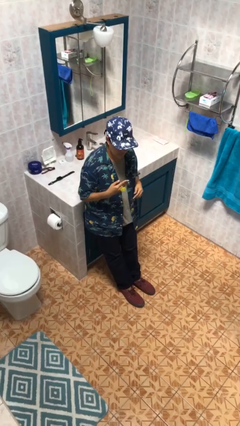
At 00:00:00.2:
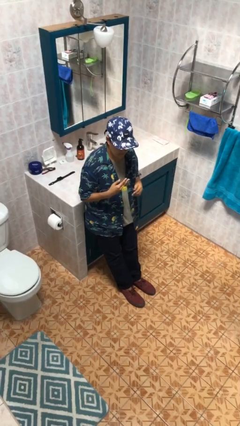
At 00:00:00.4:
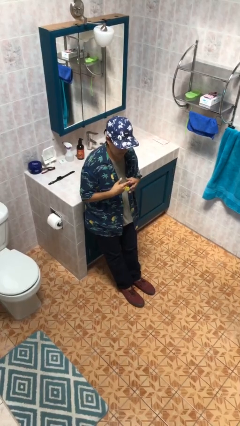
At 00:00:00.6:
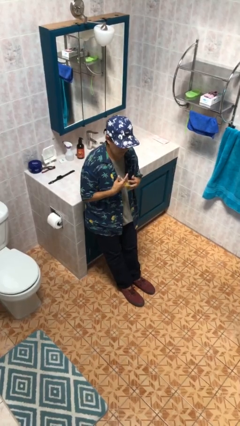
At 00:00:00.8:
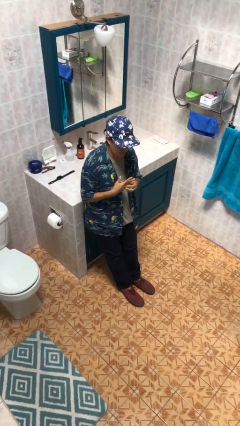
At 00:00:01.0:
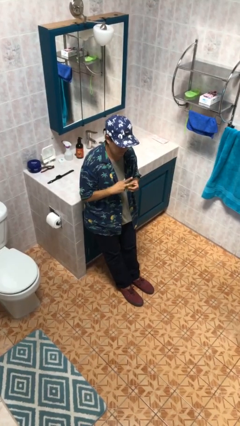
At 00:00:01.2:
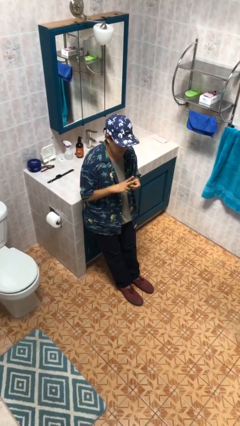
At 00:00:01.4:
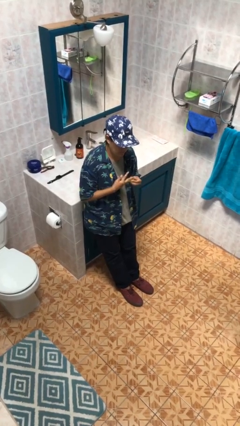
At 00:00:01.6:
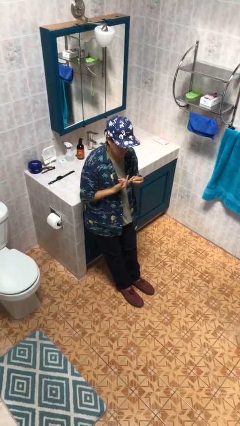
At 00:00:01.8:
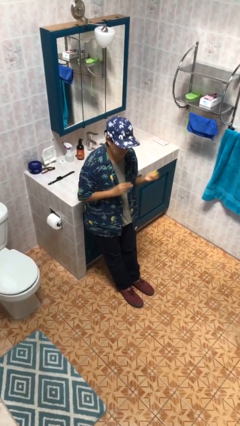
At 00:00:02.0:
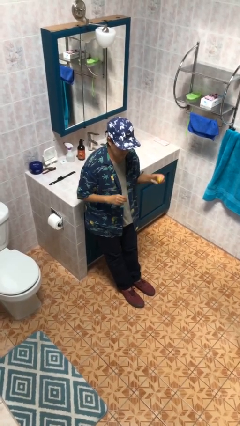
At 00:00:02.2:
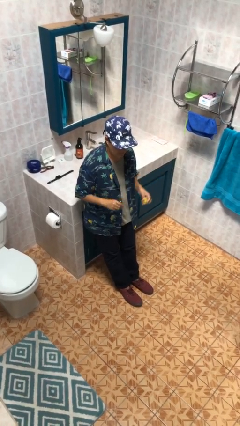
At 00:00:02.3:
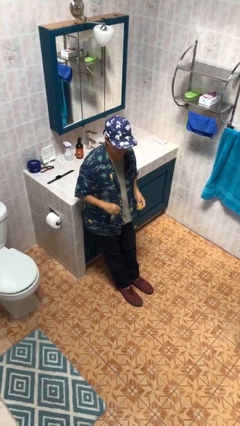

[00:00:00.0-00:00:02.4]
person takes off ring

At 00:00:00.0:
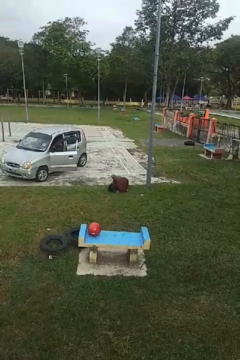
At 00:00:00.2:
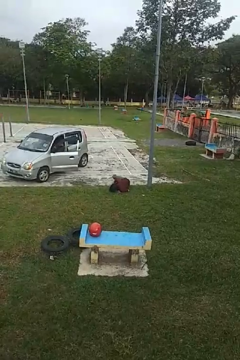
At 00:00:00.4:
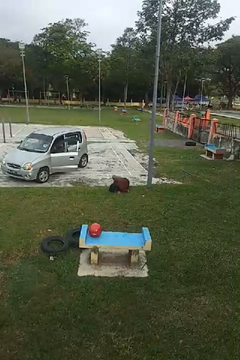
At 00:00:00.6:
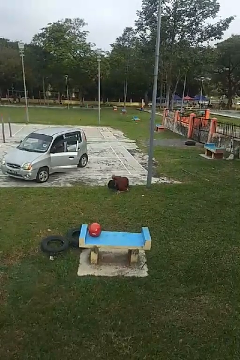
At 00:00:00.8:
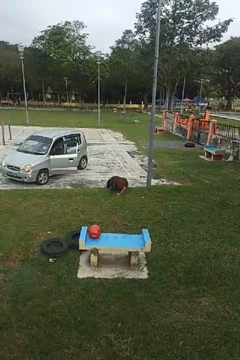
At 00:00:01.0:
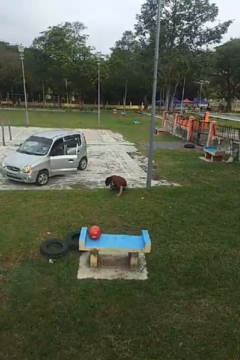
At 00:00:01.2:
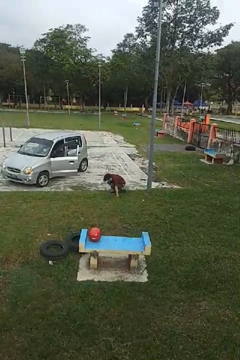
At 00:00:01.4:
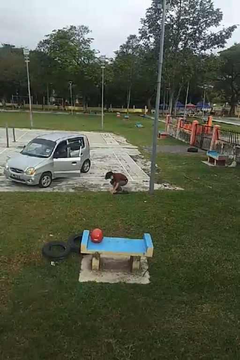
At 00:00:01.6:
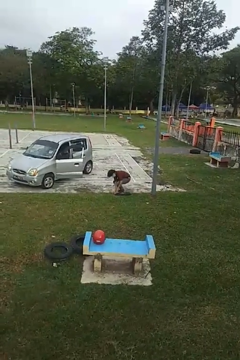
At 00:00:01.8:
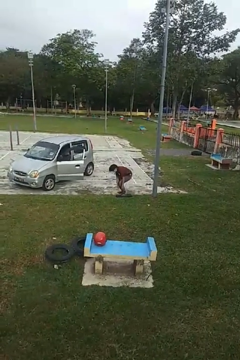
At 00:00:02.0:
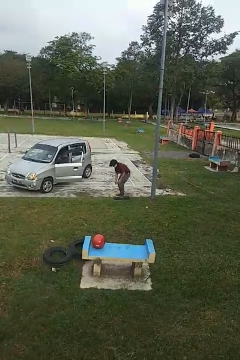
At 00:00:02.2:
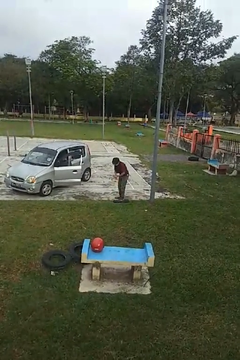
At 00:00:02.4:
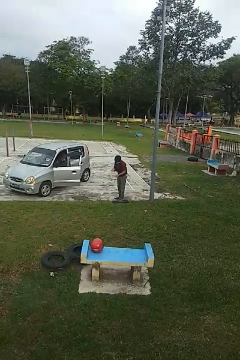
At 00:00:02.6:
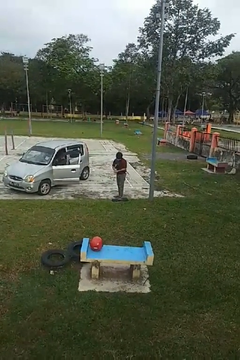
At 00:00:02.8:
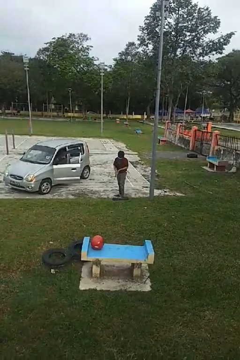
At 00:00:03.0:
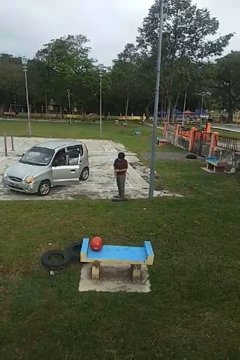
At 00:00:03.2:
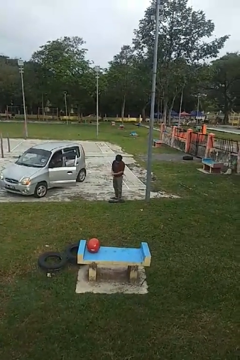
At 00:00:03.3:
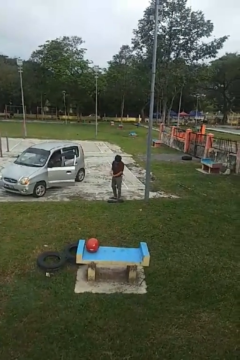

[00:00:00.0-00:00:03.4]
person stands up from floor

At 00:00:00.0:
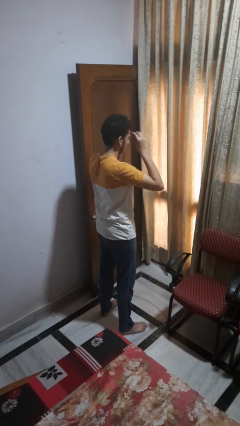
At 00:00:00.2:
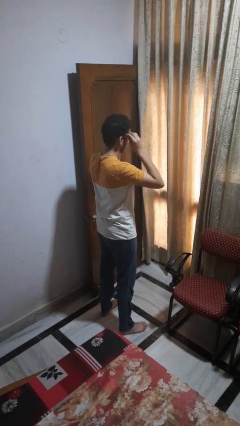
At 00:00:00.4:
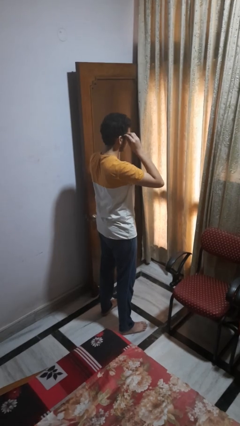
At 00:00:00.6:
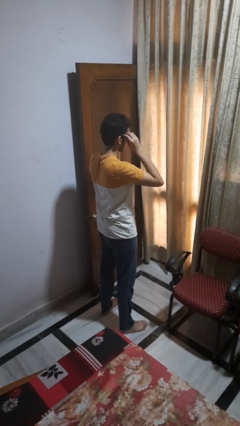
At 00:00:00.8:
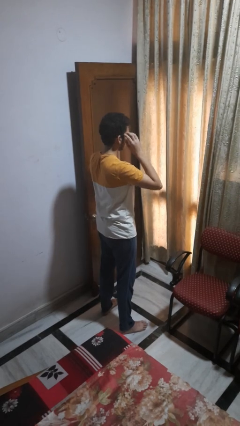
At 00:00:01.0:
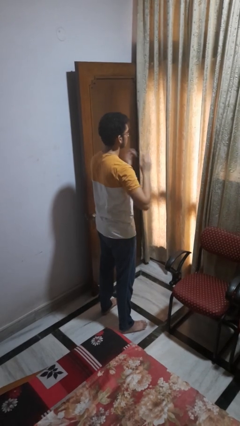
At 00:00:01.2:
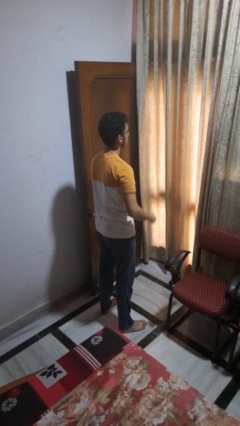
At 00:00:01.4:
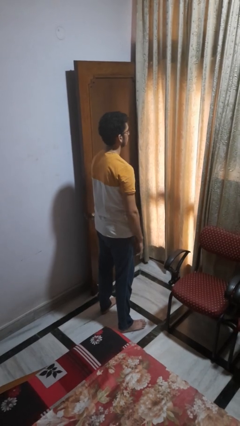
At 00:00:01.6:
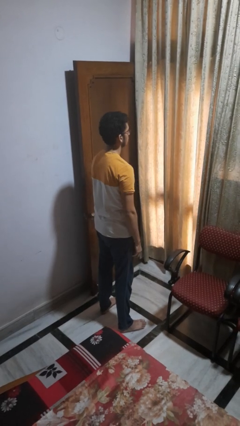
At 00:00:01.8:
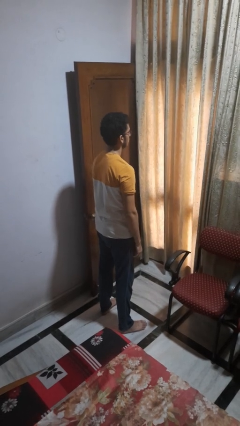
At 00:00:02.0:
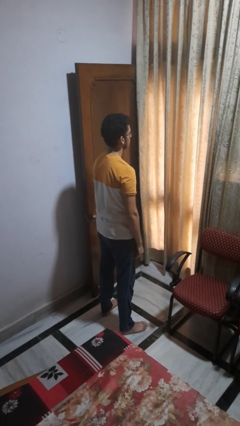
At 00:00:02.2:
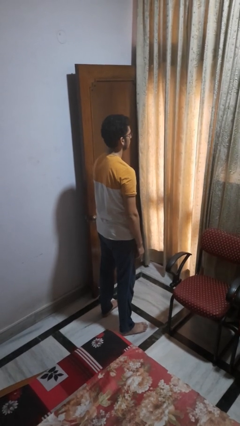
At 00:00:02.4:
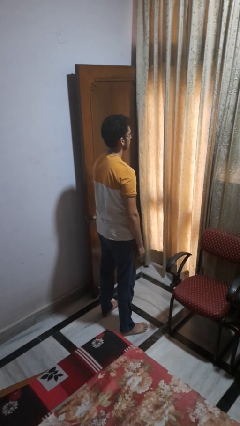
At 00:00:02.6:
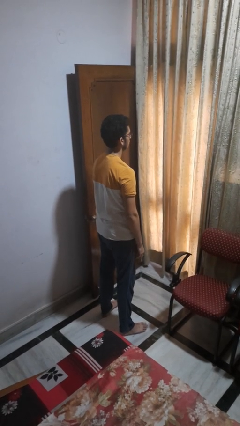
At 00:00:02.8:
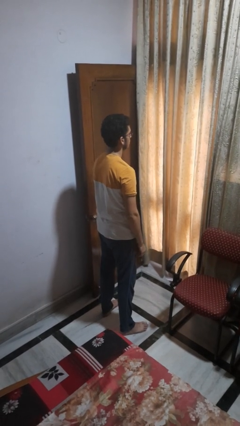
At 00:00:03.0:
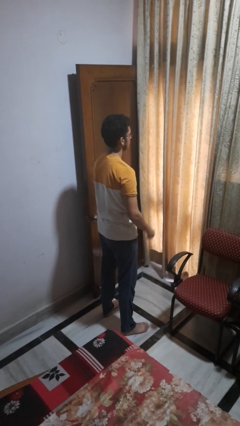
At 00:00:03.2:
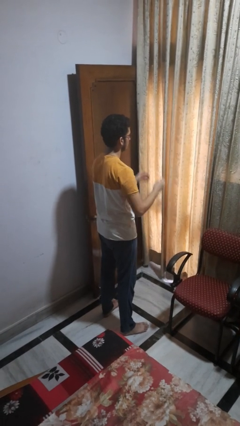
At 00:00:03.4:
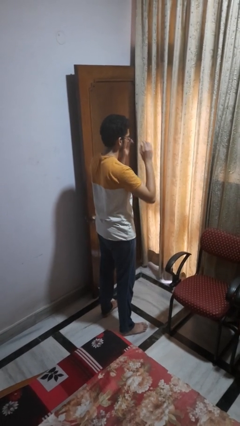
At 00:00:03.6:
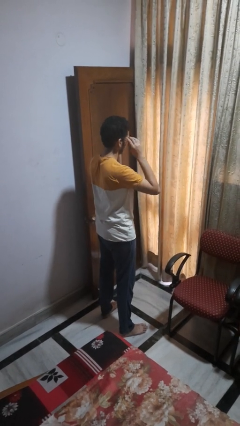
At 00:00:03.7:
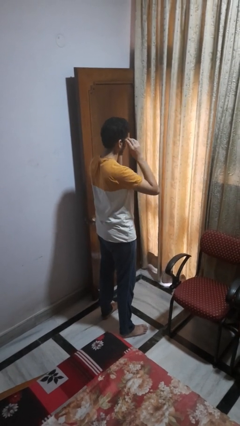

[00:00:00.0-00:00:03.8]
person puts on glasses

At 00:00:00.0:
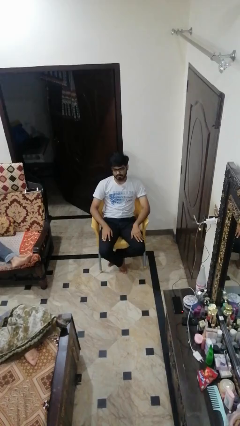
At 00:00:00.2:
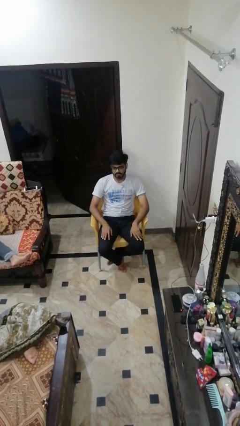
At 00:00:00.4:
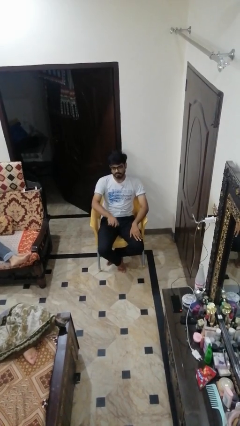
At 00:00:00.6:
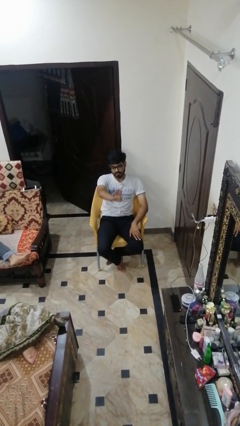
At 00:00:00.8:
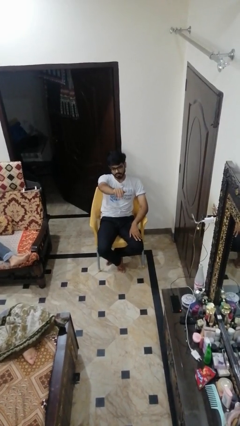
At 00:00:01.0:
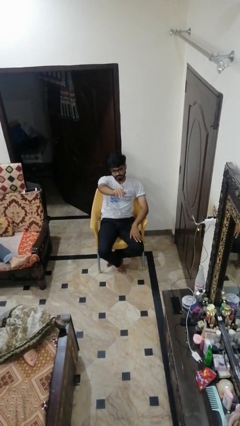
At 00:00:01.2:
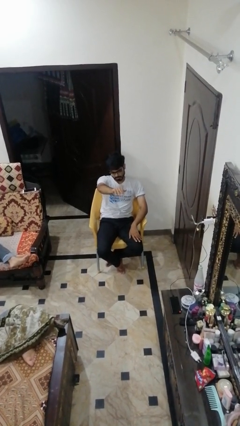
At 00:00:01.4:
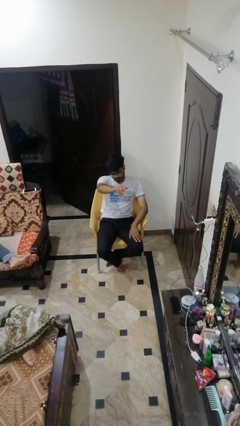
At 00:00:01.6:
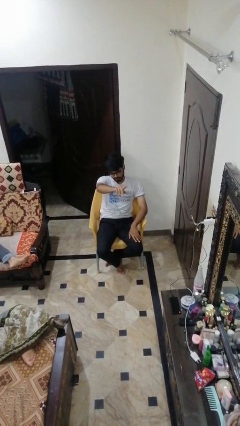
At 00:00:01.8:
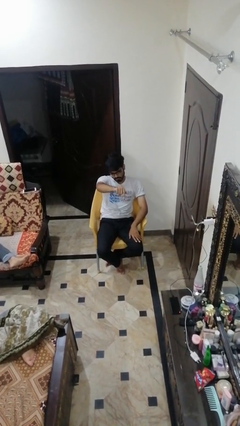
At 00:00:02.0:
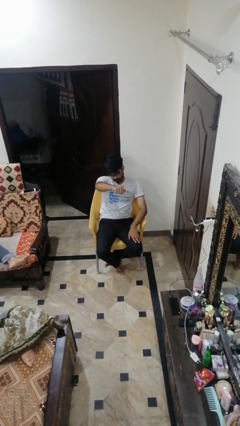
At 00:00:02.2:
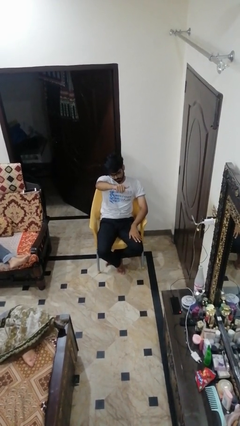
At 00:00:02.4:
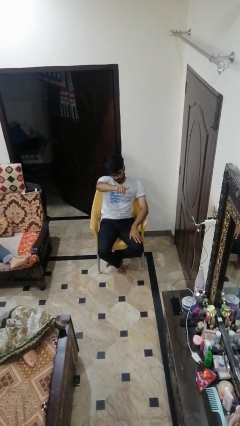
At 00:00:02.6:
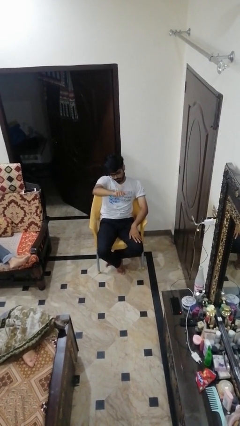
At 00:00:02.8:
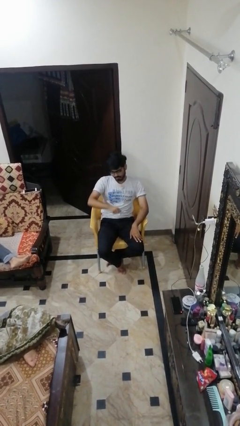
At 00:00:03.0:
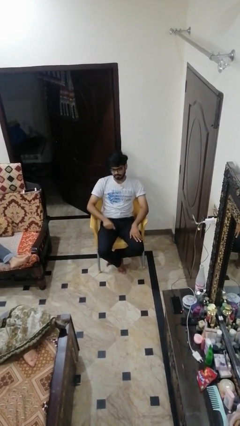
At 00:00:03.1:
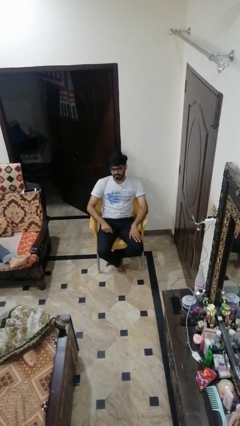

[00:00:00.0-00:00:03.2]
person gestures come here

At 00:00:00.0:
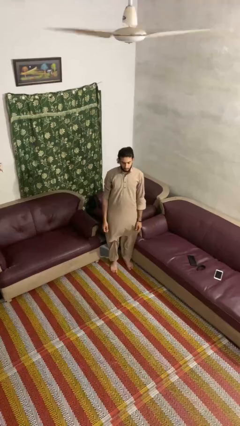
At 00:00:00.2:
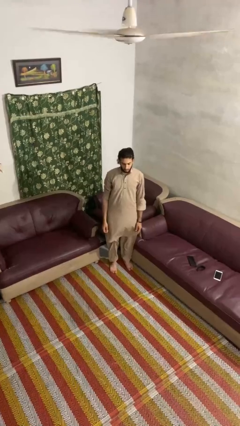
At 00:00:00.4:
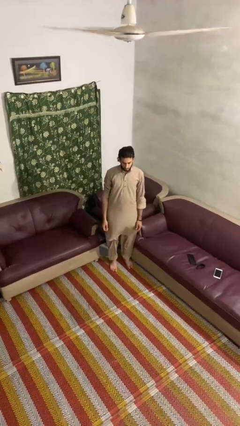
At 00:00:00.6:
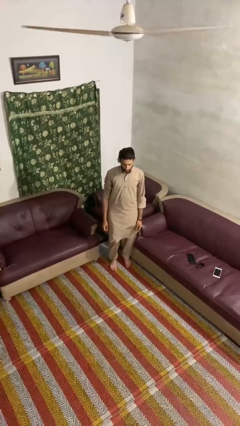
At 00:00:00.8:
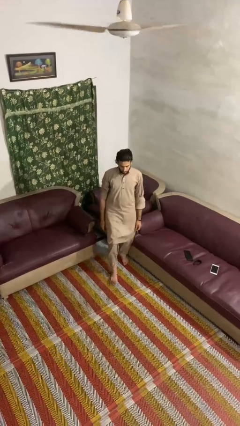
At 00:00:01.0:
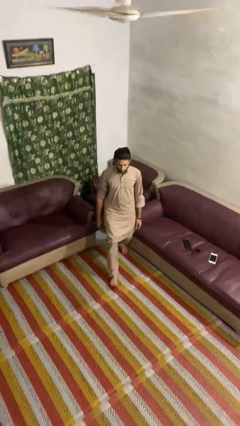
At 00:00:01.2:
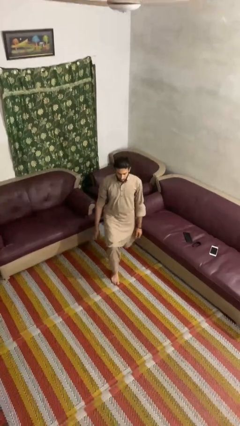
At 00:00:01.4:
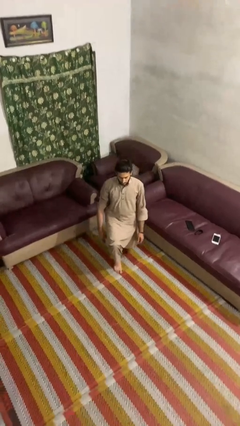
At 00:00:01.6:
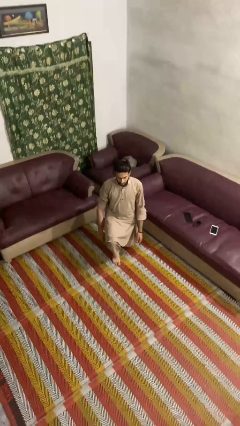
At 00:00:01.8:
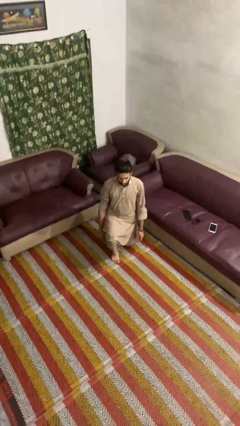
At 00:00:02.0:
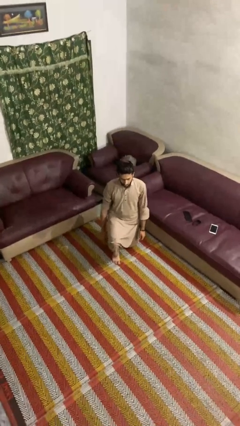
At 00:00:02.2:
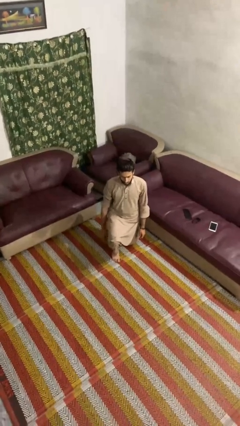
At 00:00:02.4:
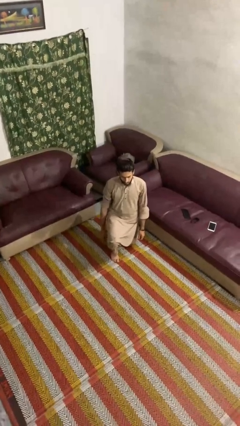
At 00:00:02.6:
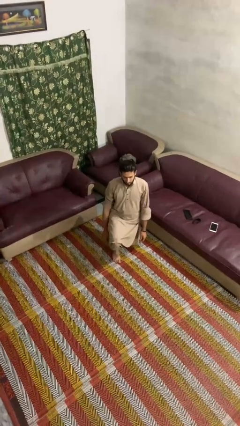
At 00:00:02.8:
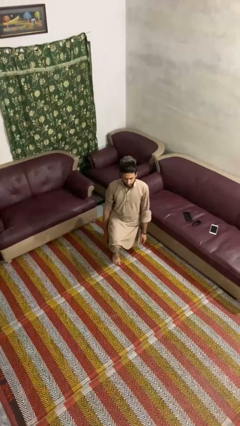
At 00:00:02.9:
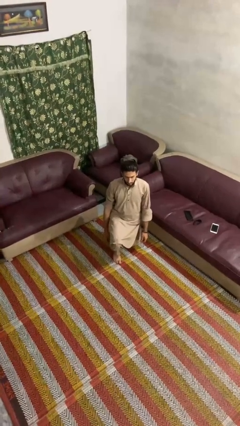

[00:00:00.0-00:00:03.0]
person kneels

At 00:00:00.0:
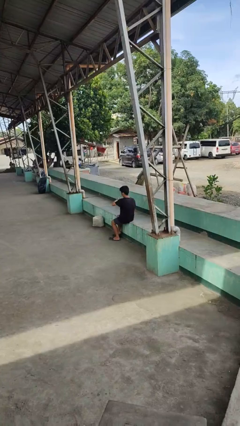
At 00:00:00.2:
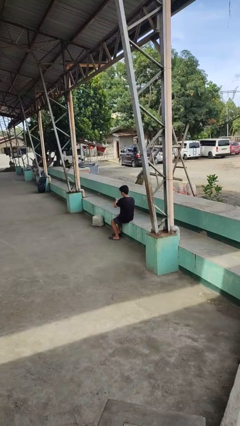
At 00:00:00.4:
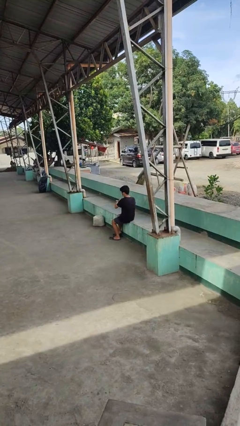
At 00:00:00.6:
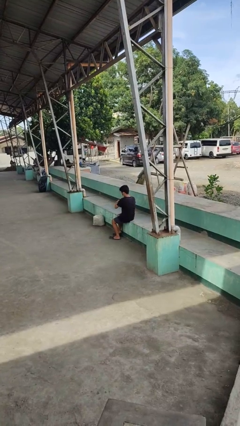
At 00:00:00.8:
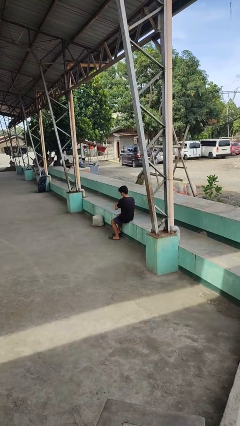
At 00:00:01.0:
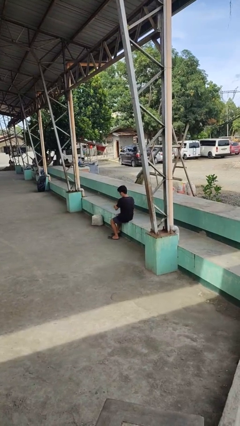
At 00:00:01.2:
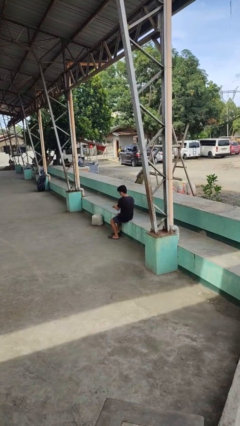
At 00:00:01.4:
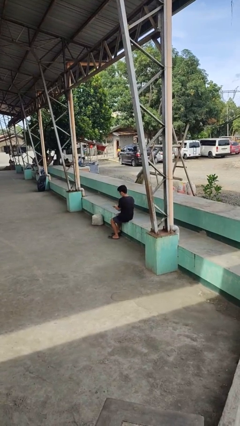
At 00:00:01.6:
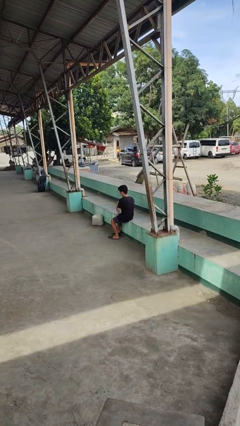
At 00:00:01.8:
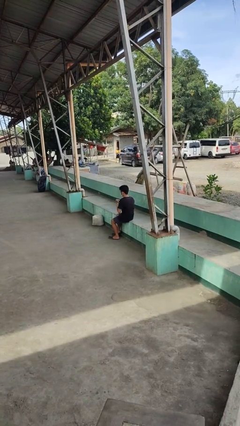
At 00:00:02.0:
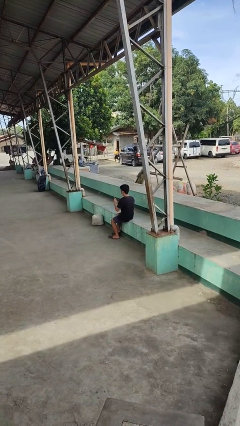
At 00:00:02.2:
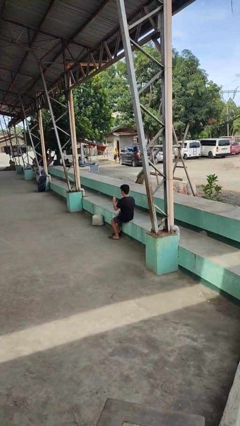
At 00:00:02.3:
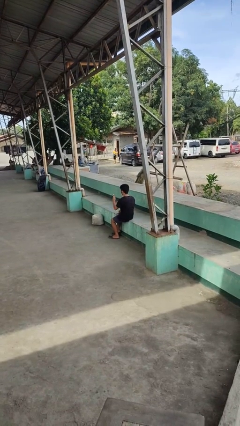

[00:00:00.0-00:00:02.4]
person takes off wristwatch
